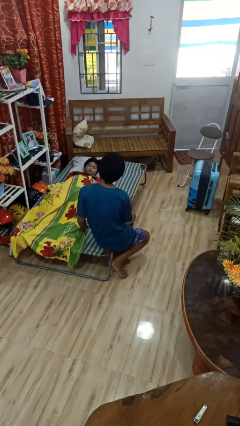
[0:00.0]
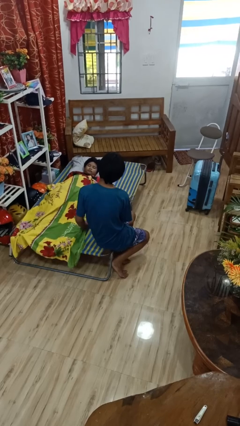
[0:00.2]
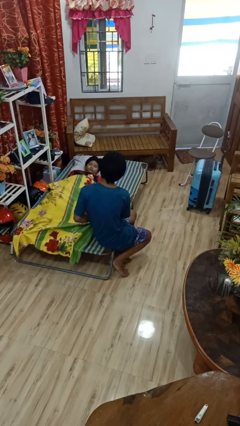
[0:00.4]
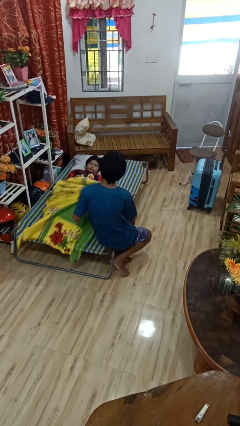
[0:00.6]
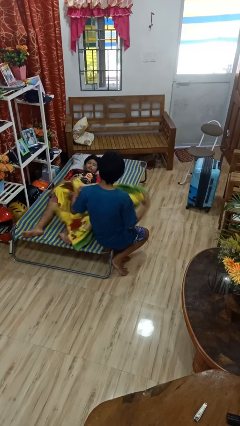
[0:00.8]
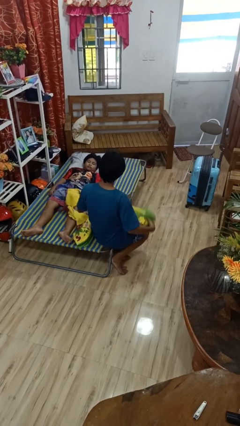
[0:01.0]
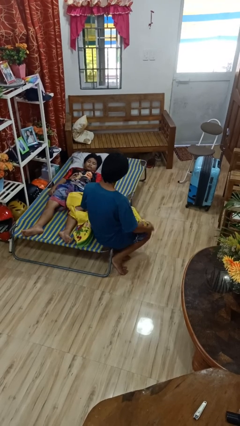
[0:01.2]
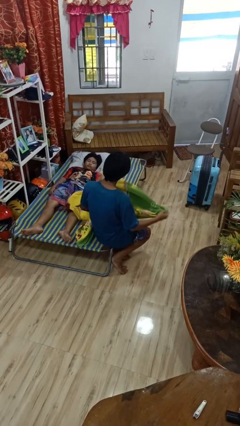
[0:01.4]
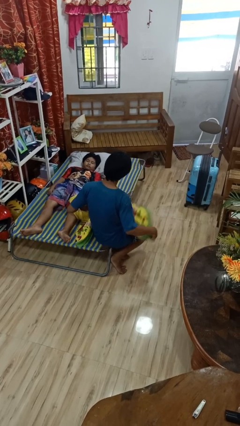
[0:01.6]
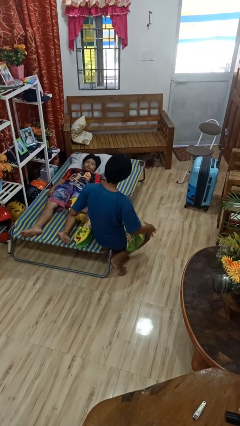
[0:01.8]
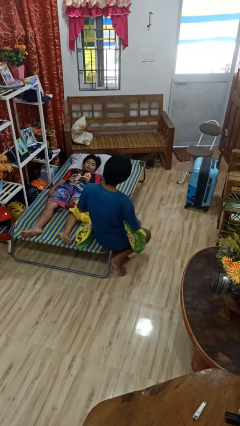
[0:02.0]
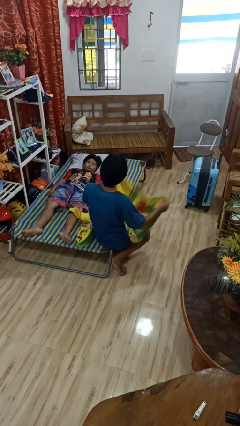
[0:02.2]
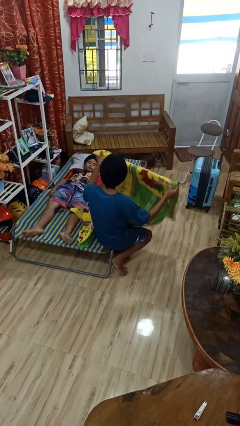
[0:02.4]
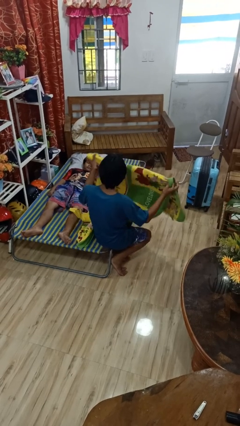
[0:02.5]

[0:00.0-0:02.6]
person uncovers friend with blanket

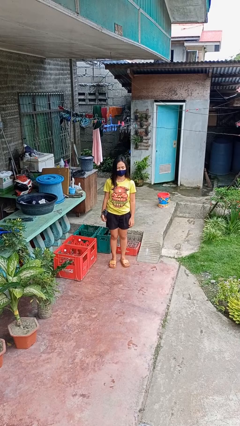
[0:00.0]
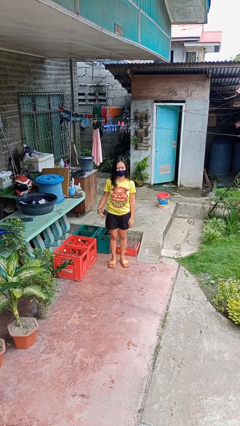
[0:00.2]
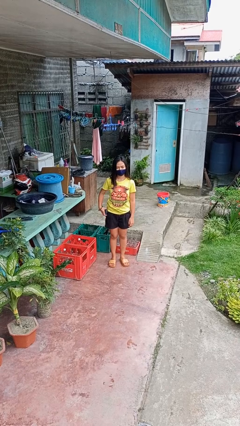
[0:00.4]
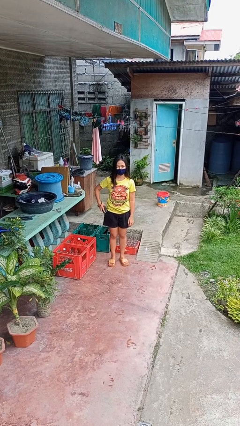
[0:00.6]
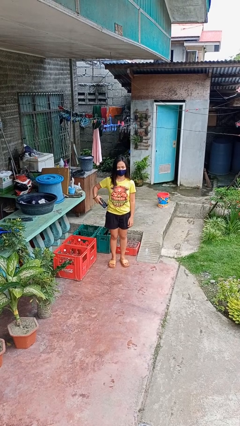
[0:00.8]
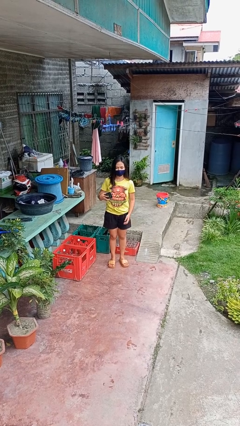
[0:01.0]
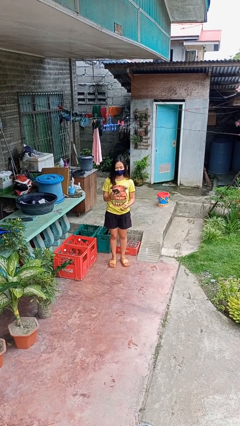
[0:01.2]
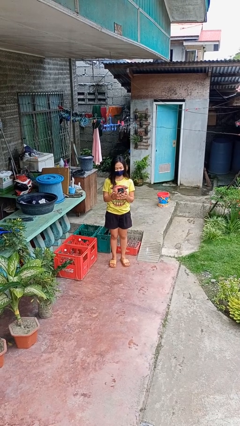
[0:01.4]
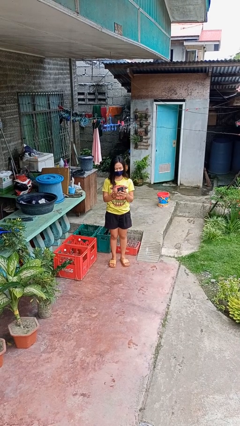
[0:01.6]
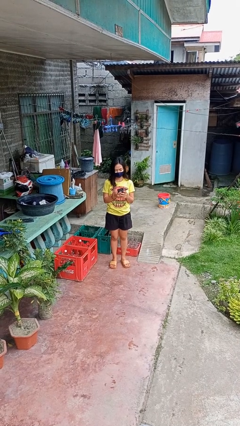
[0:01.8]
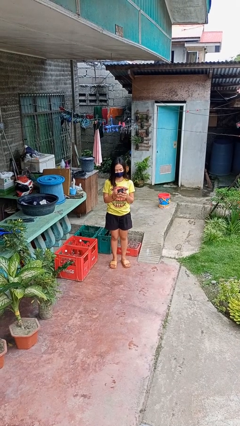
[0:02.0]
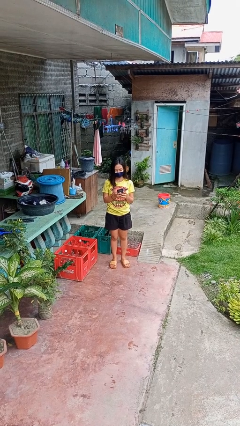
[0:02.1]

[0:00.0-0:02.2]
person takes phone from pocket

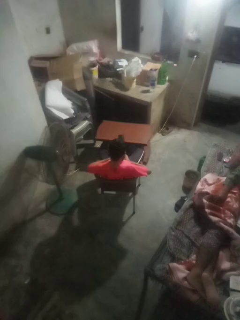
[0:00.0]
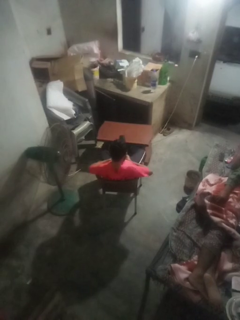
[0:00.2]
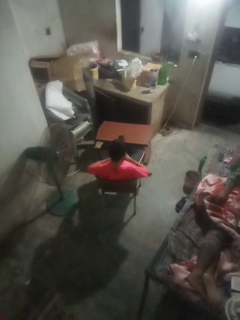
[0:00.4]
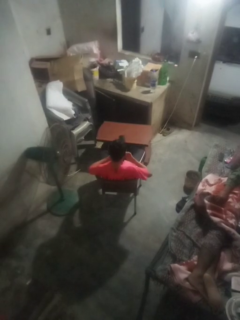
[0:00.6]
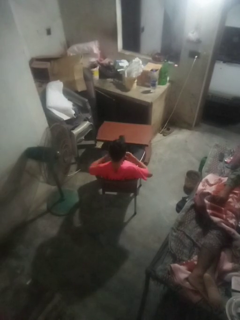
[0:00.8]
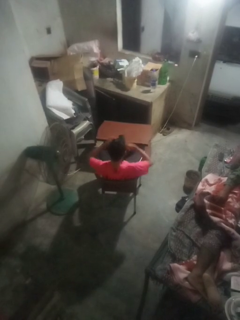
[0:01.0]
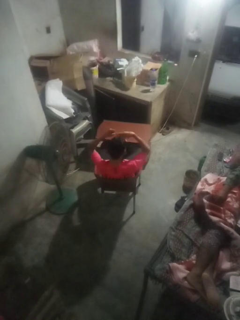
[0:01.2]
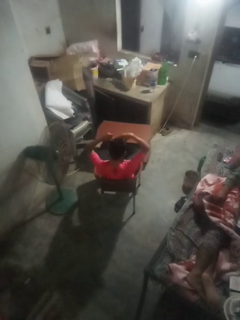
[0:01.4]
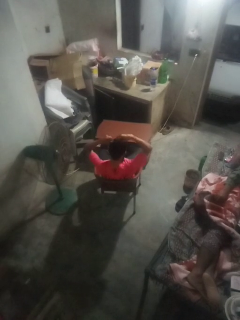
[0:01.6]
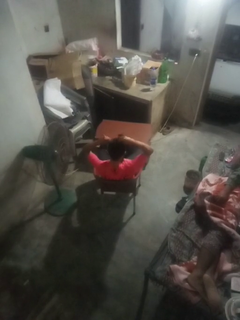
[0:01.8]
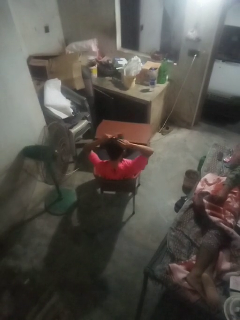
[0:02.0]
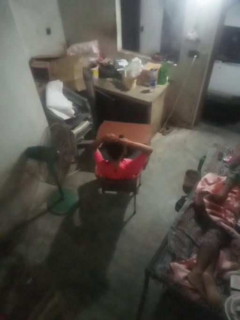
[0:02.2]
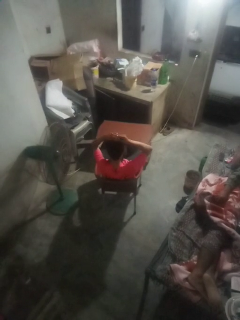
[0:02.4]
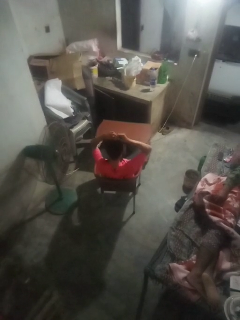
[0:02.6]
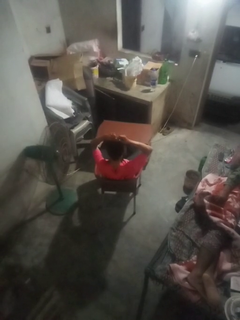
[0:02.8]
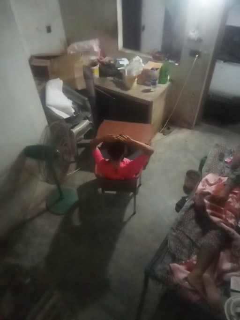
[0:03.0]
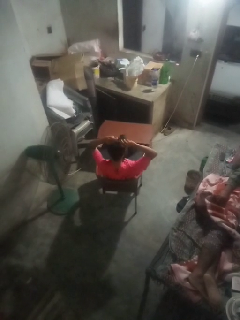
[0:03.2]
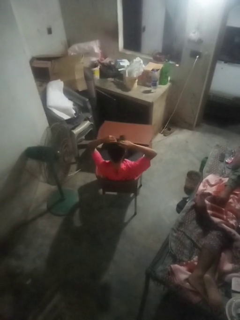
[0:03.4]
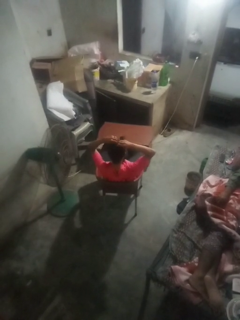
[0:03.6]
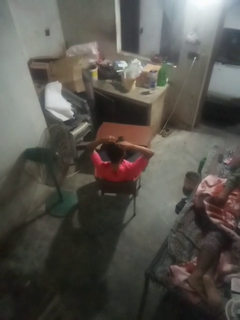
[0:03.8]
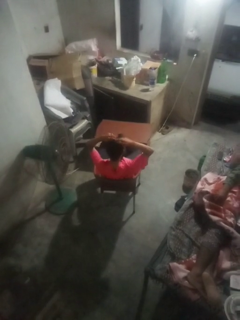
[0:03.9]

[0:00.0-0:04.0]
person puts hair in ponytail

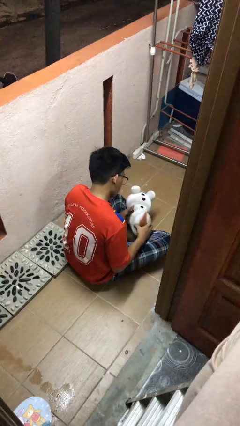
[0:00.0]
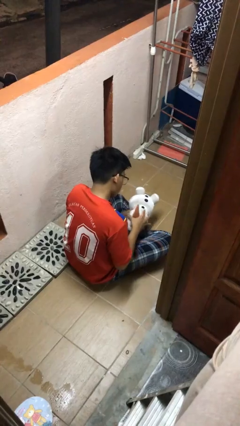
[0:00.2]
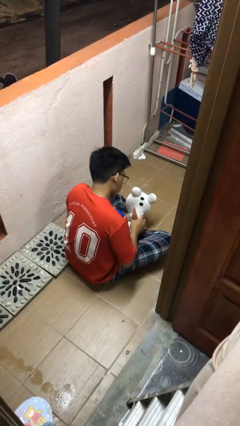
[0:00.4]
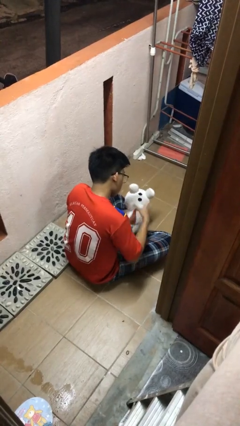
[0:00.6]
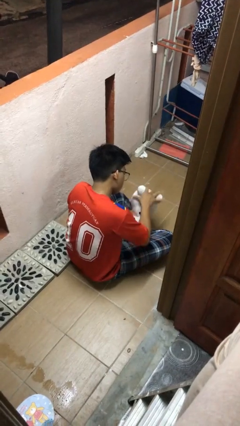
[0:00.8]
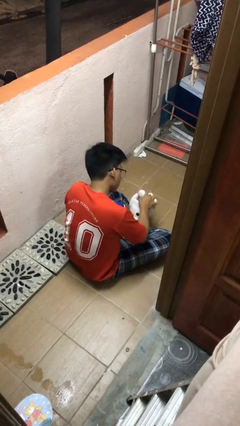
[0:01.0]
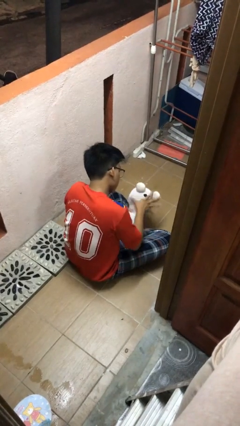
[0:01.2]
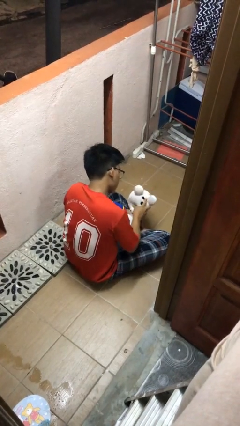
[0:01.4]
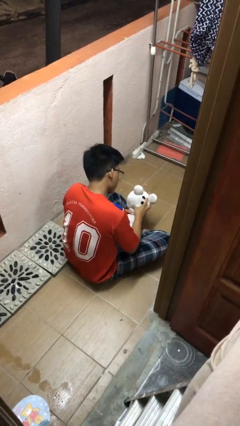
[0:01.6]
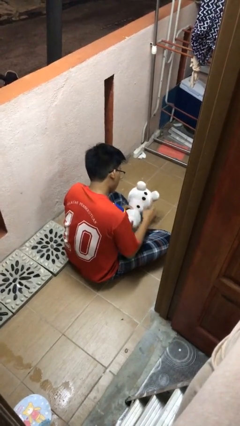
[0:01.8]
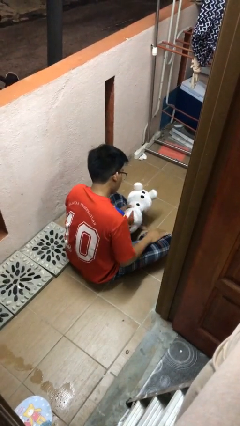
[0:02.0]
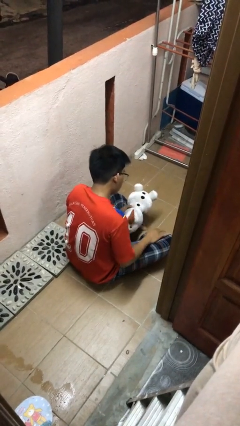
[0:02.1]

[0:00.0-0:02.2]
person squeezes object

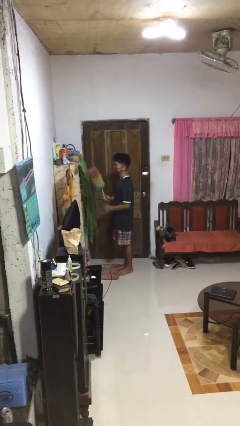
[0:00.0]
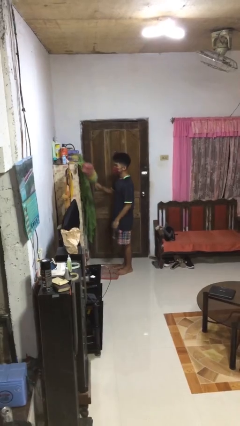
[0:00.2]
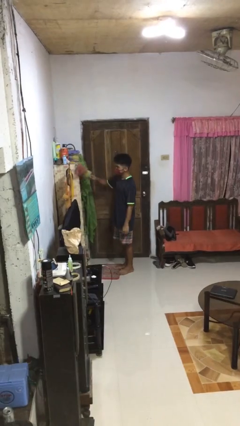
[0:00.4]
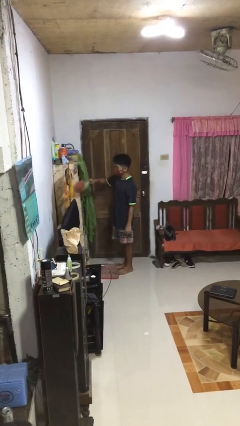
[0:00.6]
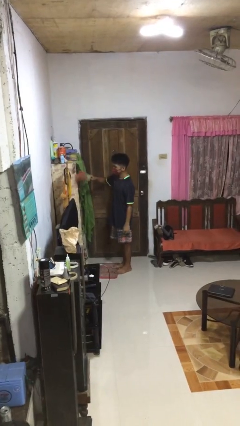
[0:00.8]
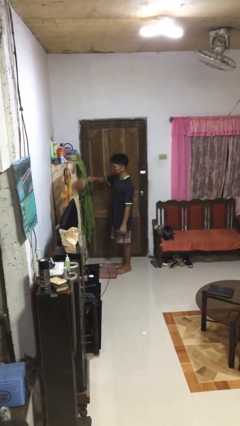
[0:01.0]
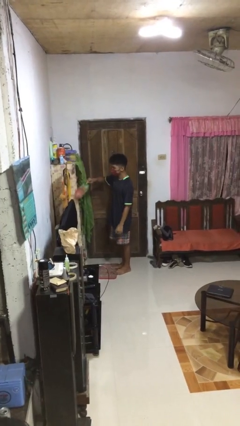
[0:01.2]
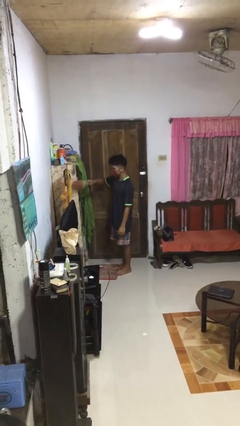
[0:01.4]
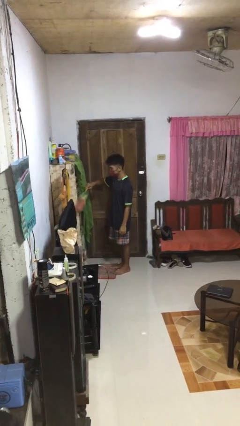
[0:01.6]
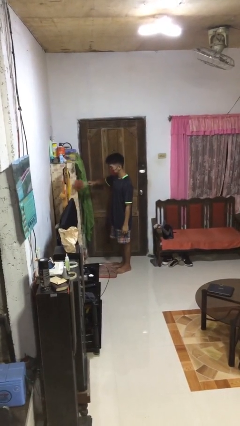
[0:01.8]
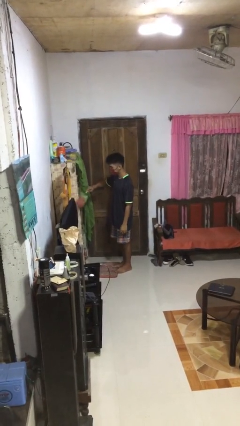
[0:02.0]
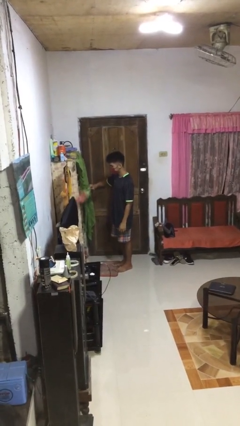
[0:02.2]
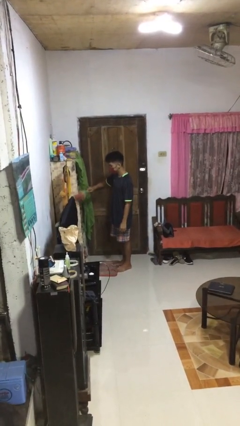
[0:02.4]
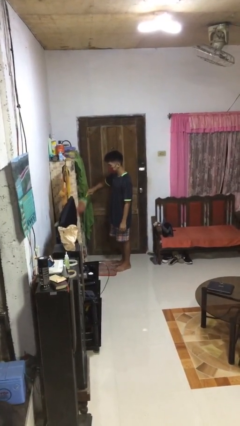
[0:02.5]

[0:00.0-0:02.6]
person dusts furniture

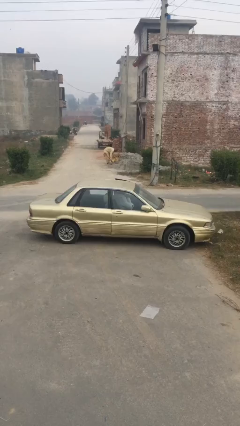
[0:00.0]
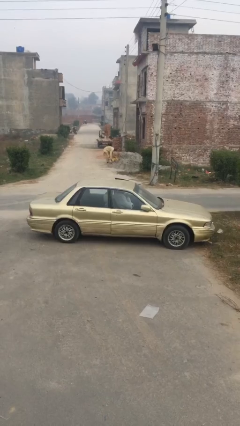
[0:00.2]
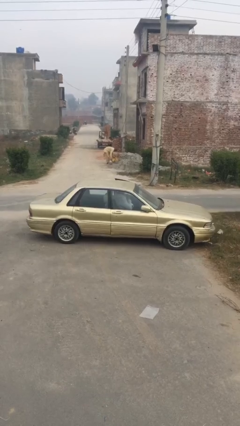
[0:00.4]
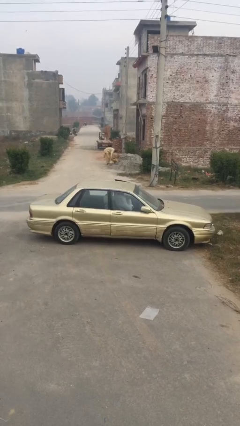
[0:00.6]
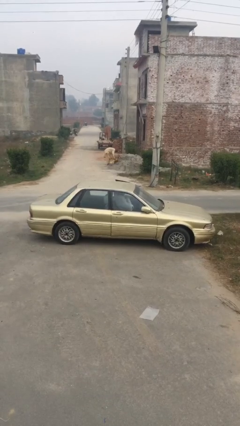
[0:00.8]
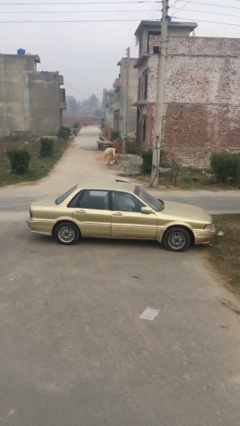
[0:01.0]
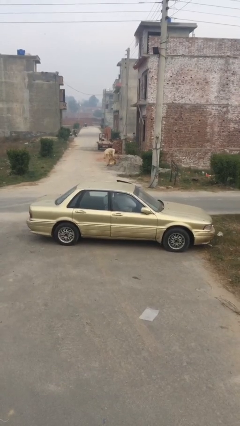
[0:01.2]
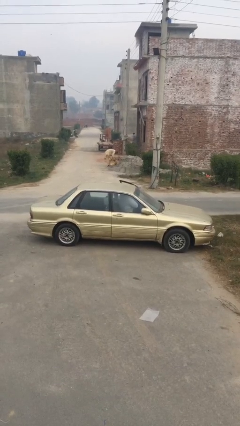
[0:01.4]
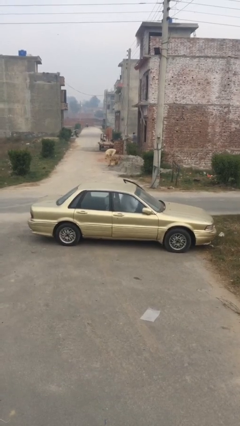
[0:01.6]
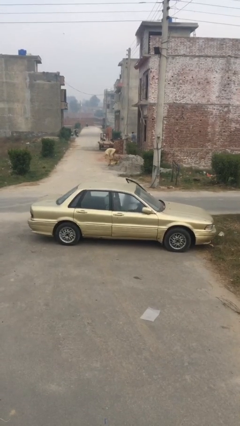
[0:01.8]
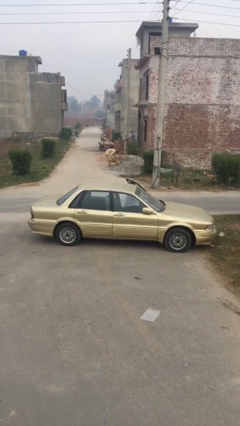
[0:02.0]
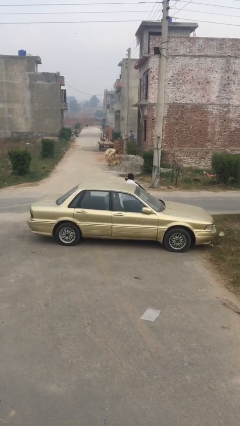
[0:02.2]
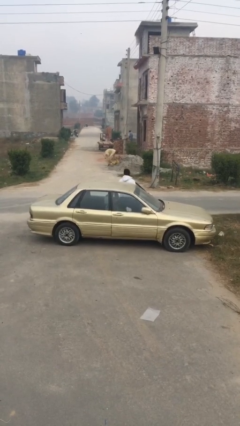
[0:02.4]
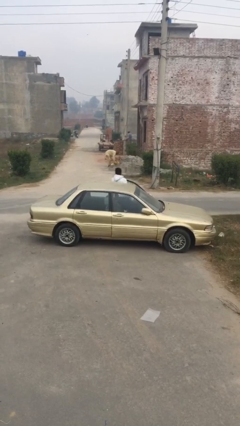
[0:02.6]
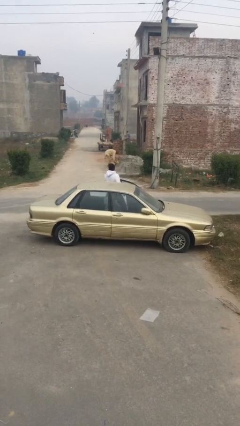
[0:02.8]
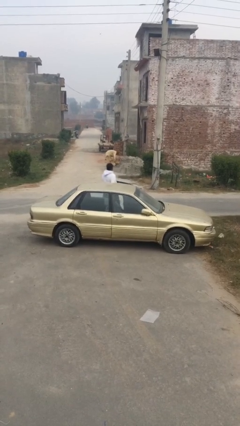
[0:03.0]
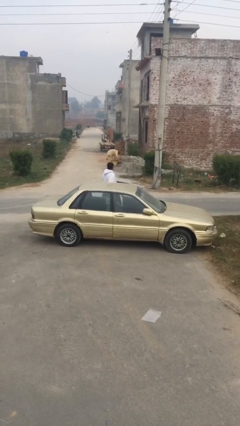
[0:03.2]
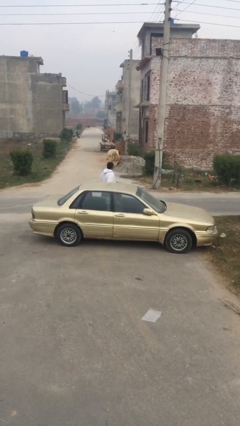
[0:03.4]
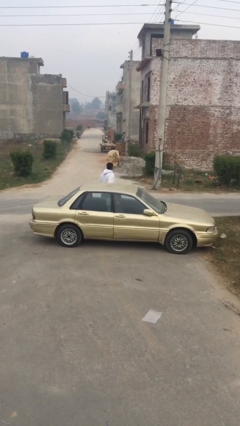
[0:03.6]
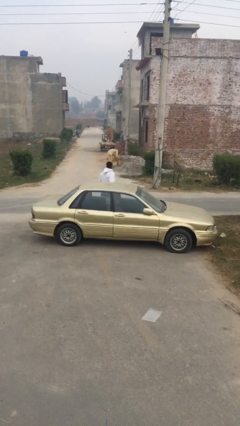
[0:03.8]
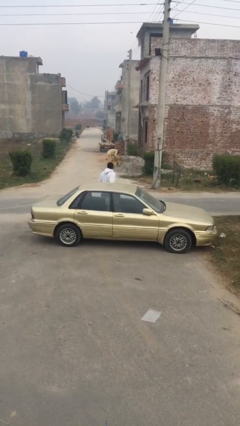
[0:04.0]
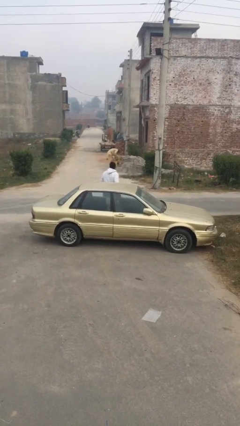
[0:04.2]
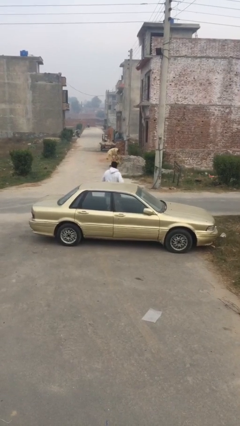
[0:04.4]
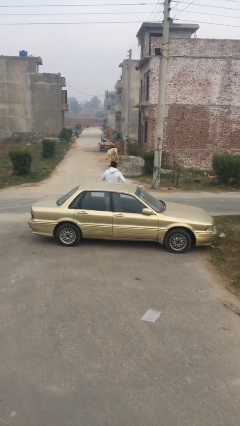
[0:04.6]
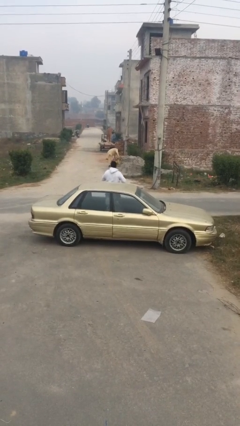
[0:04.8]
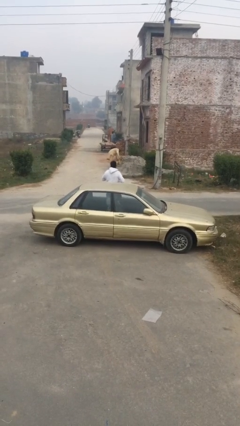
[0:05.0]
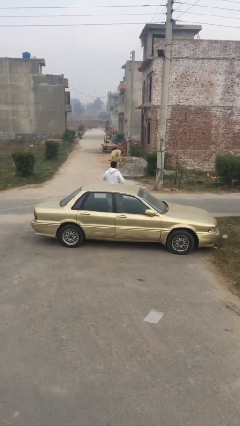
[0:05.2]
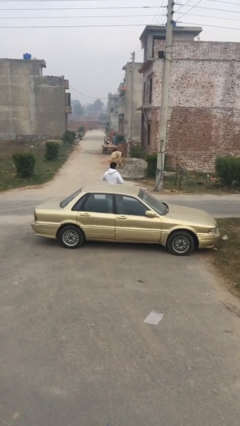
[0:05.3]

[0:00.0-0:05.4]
car drops off person
